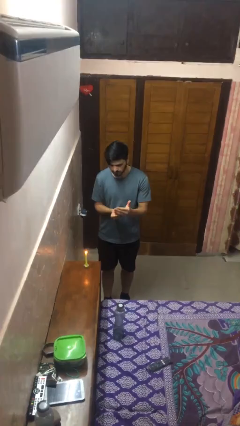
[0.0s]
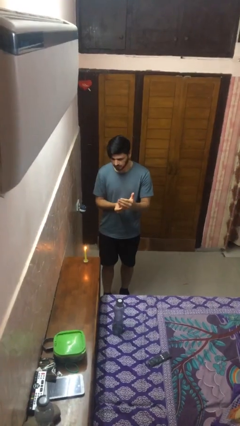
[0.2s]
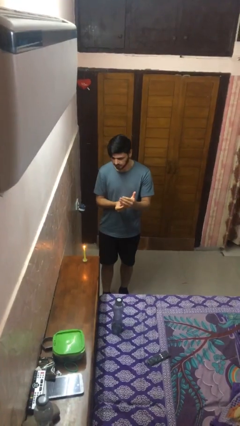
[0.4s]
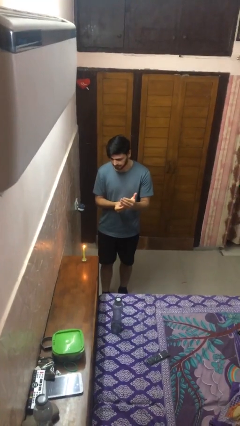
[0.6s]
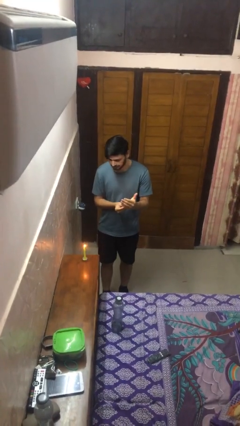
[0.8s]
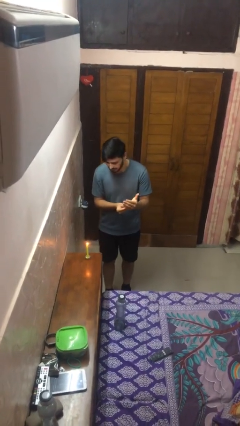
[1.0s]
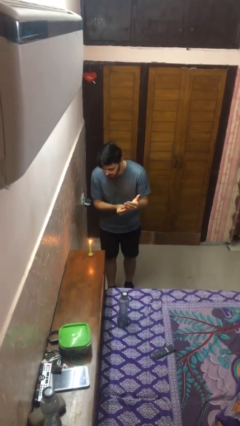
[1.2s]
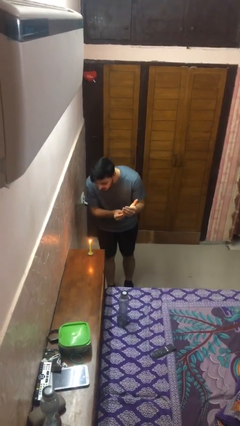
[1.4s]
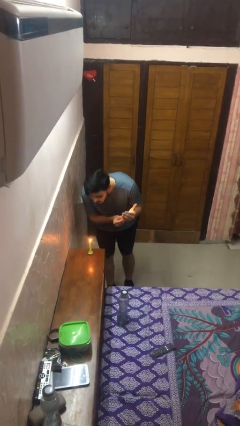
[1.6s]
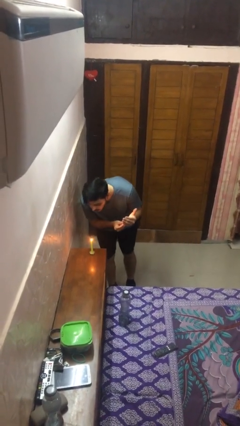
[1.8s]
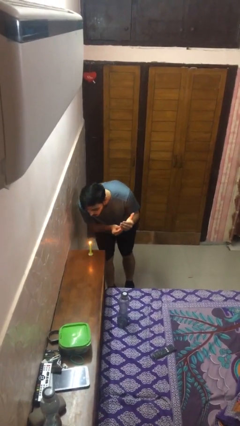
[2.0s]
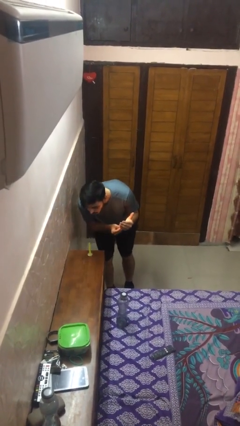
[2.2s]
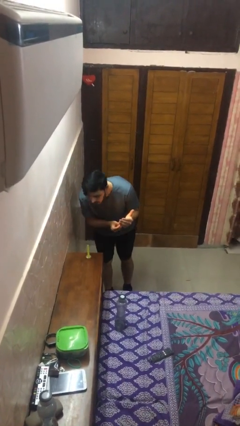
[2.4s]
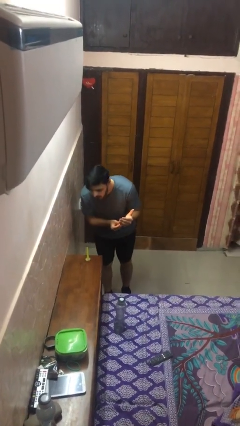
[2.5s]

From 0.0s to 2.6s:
person extinguishes candle

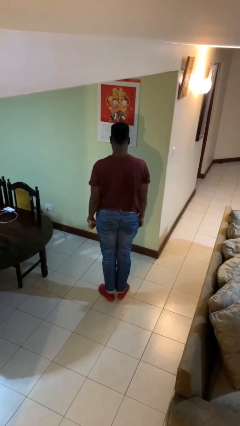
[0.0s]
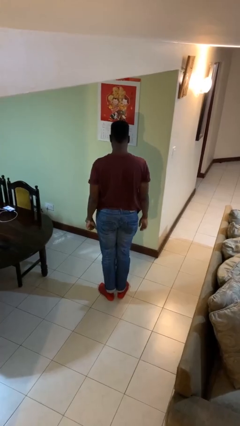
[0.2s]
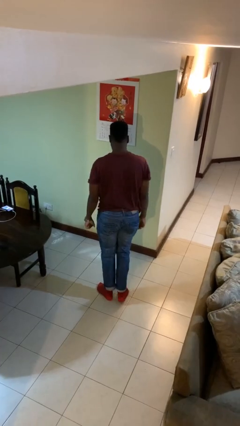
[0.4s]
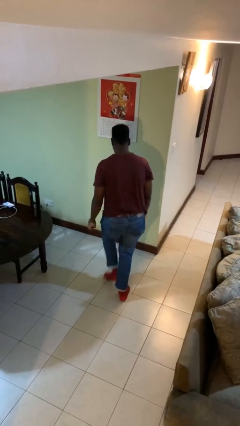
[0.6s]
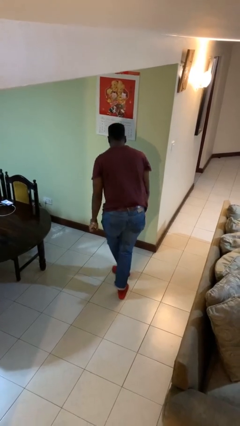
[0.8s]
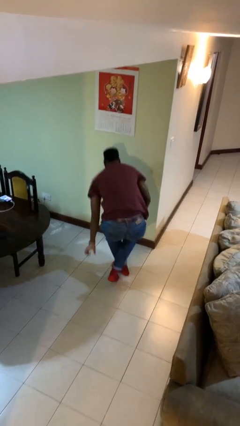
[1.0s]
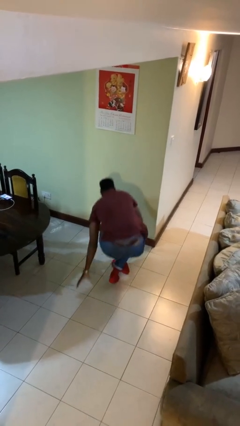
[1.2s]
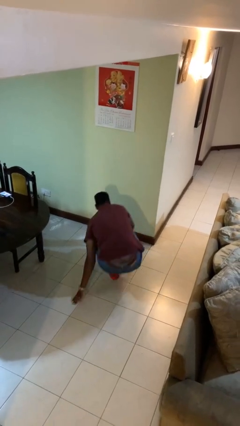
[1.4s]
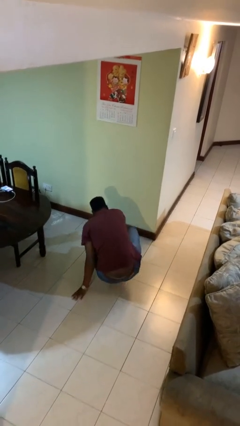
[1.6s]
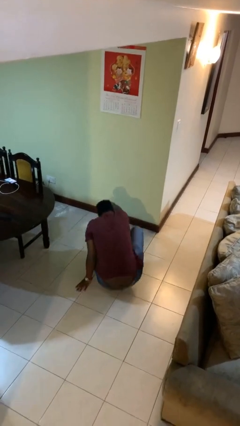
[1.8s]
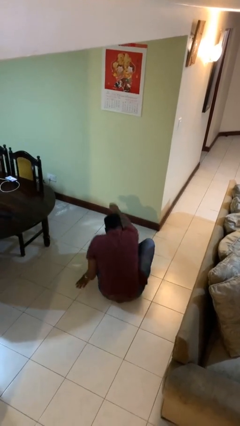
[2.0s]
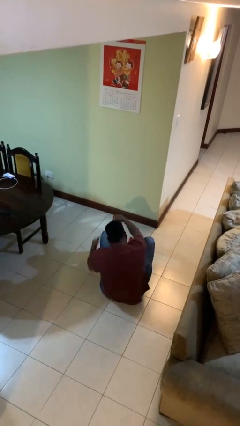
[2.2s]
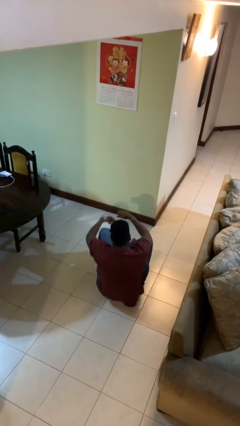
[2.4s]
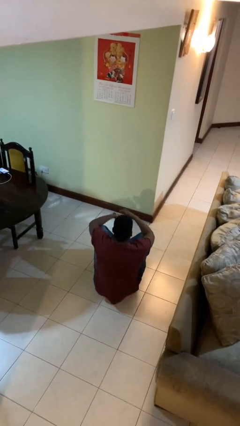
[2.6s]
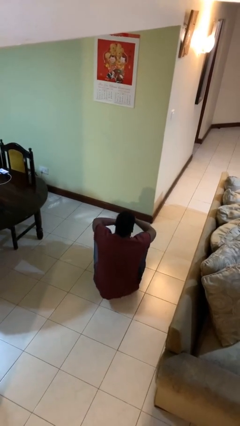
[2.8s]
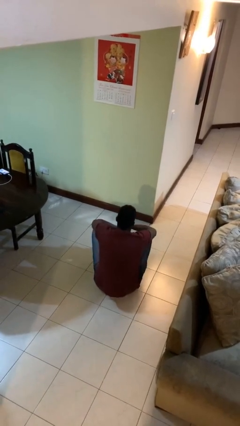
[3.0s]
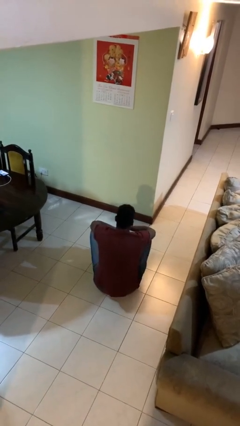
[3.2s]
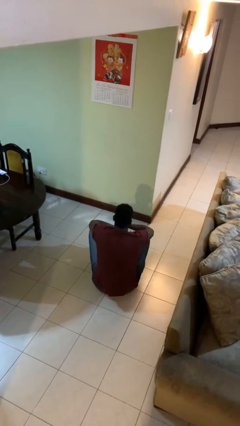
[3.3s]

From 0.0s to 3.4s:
person sits crisscross

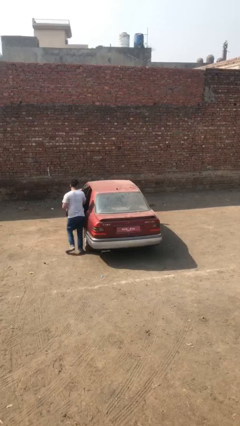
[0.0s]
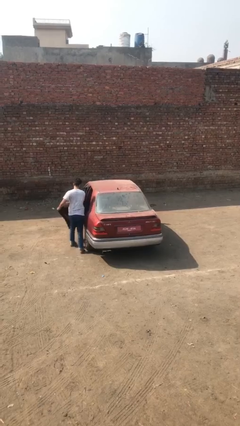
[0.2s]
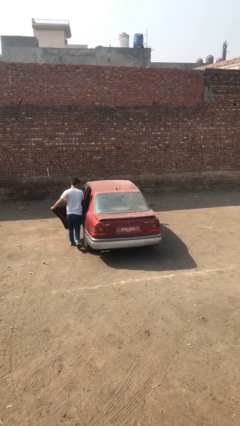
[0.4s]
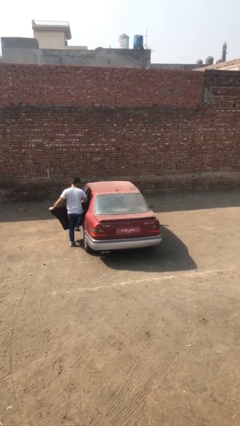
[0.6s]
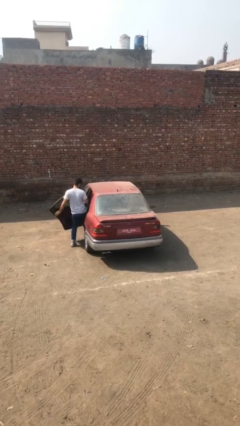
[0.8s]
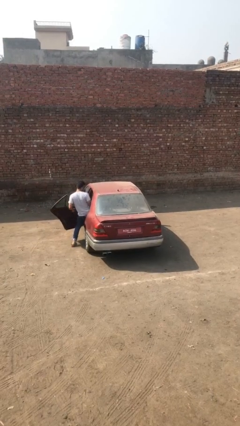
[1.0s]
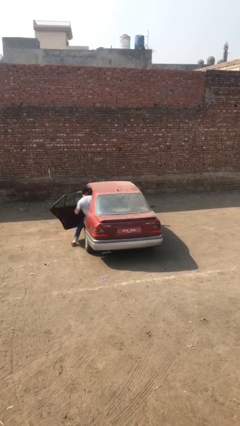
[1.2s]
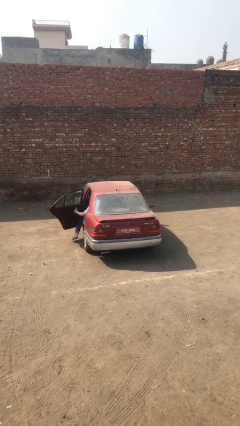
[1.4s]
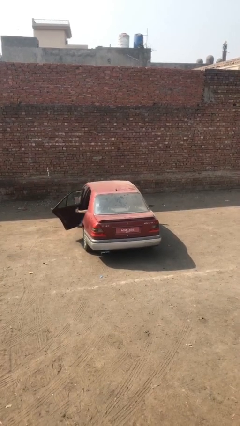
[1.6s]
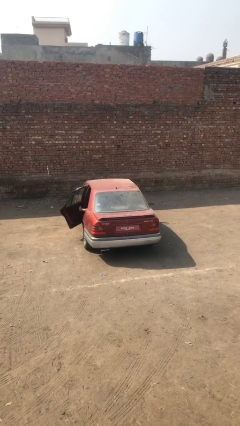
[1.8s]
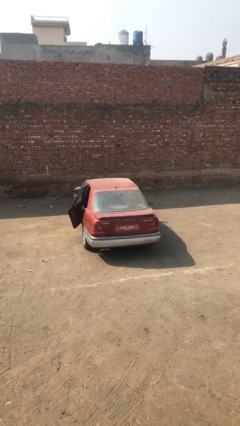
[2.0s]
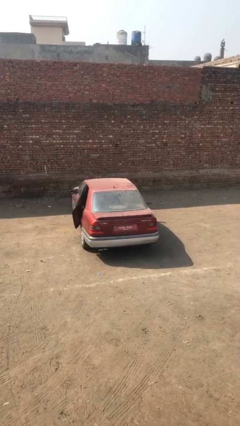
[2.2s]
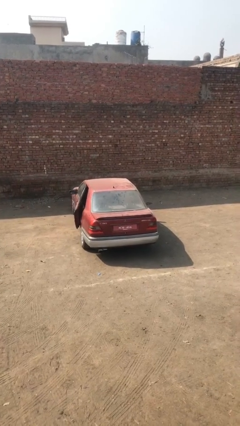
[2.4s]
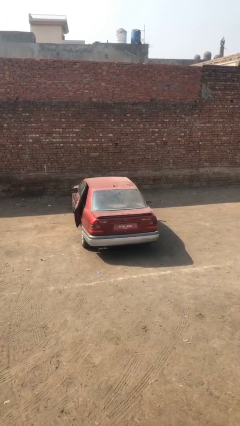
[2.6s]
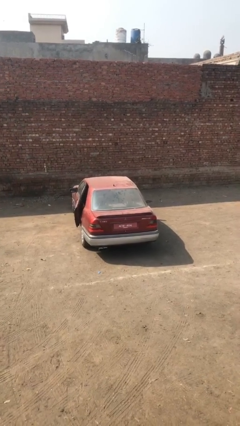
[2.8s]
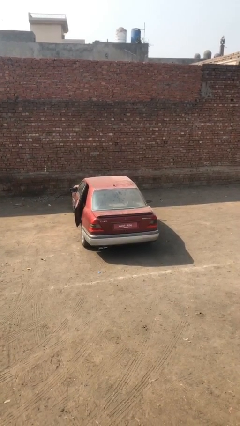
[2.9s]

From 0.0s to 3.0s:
car picks up person

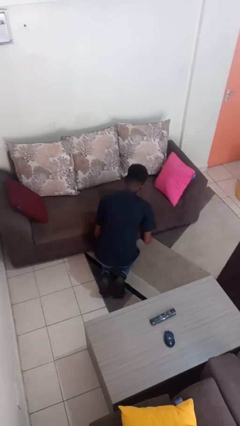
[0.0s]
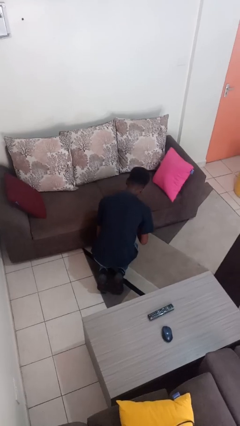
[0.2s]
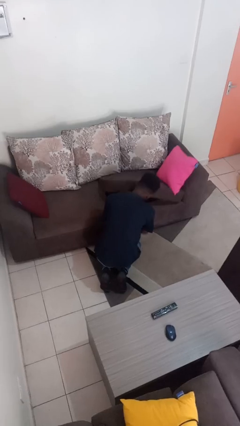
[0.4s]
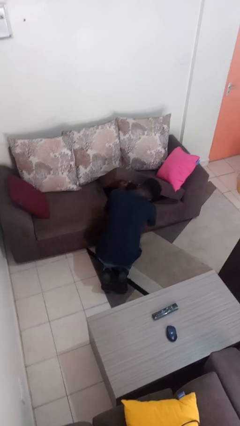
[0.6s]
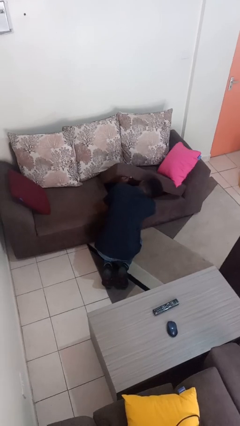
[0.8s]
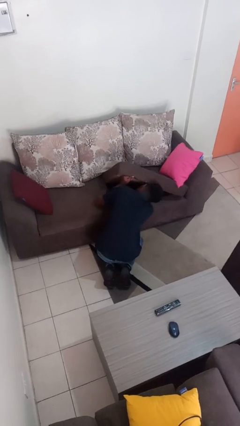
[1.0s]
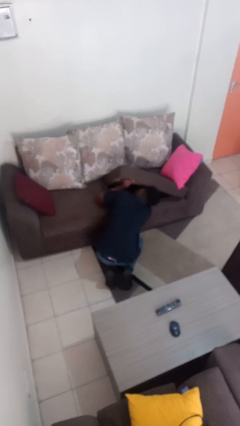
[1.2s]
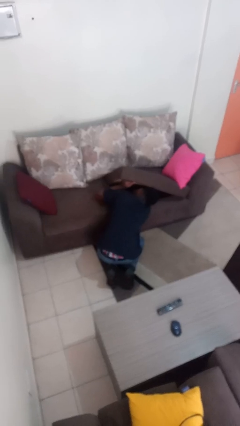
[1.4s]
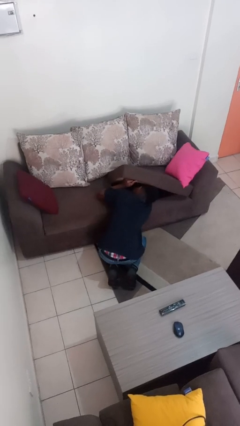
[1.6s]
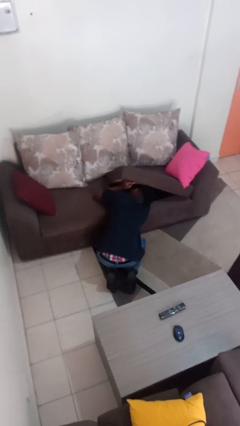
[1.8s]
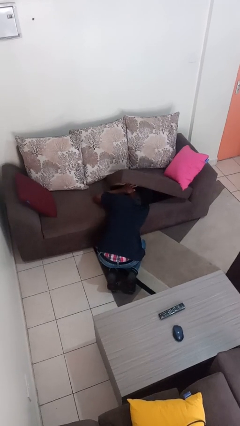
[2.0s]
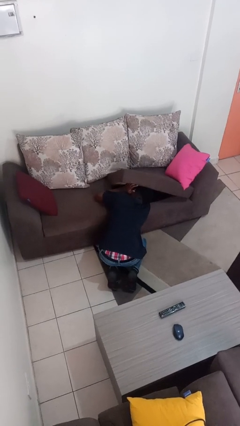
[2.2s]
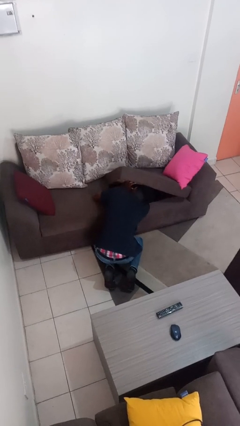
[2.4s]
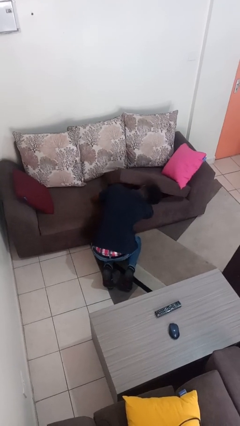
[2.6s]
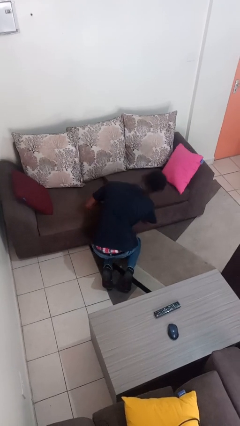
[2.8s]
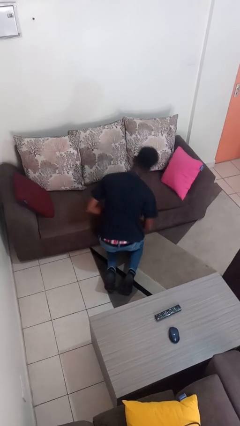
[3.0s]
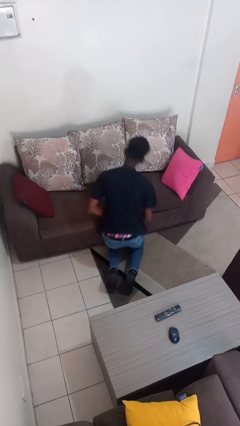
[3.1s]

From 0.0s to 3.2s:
person searches under couch

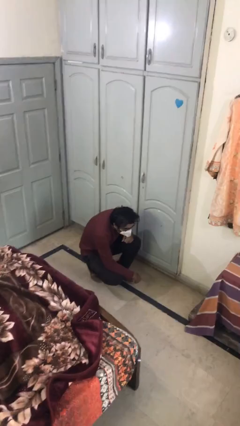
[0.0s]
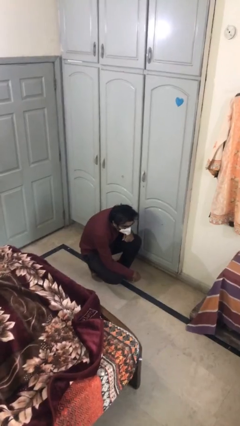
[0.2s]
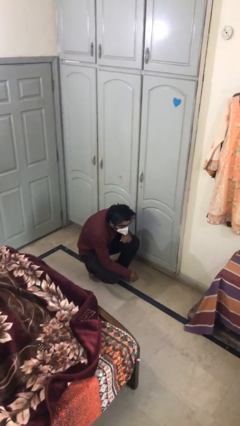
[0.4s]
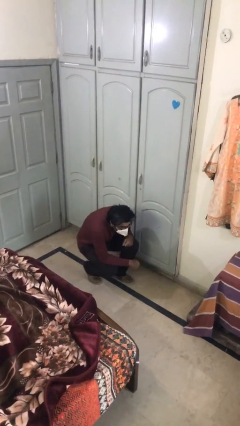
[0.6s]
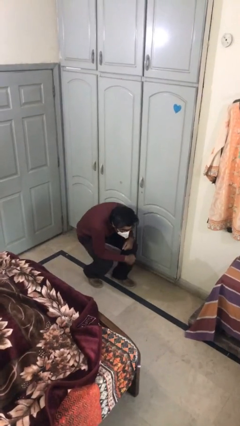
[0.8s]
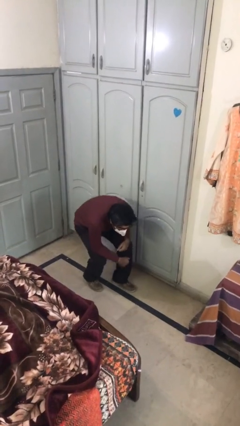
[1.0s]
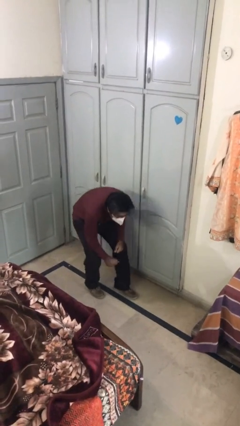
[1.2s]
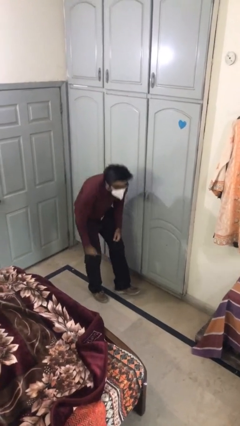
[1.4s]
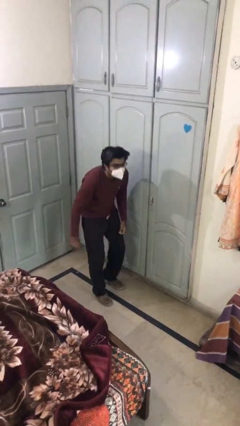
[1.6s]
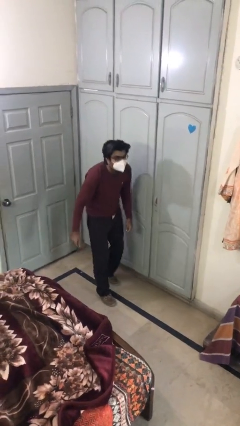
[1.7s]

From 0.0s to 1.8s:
person stands up

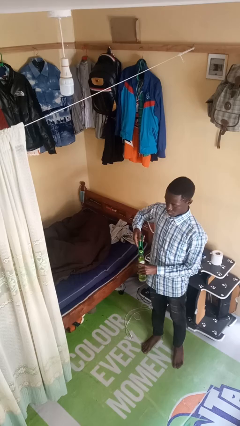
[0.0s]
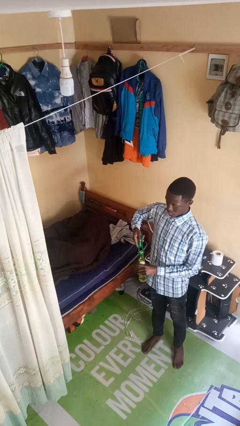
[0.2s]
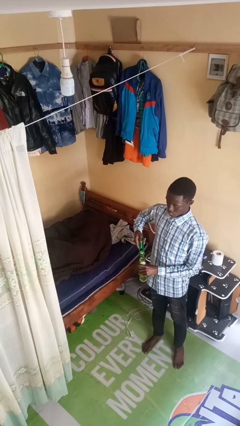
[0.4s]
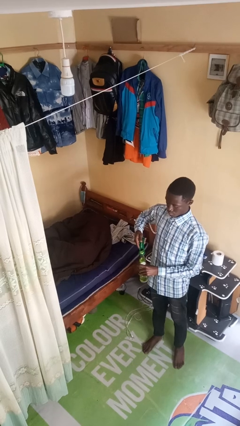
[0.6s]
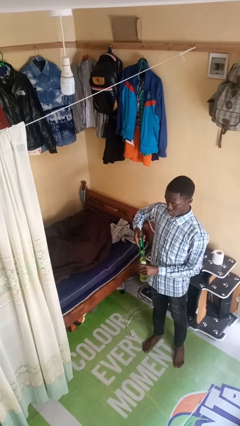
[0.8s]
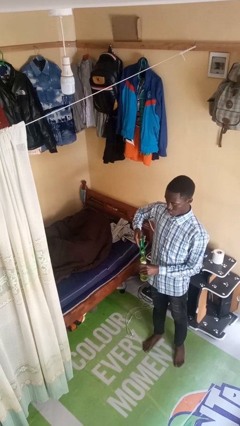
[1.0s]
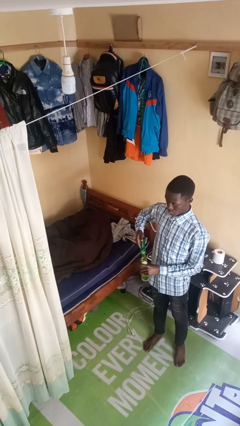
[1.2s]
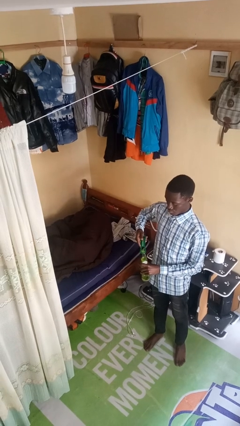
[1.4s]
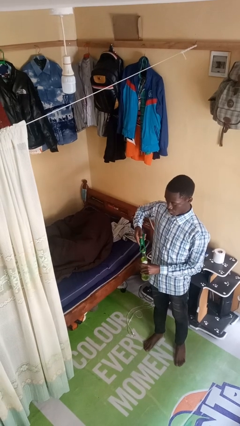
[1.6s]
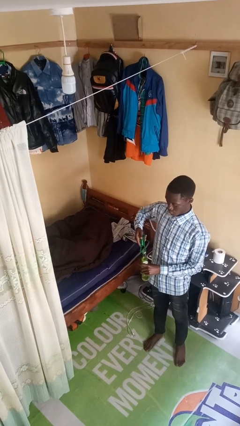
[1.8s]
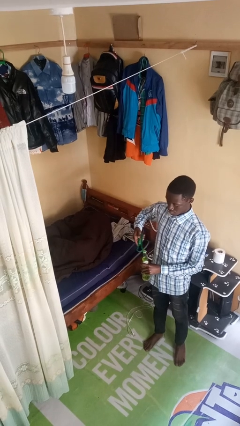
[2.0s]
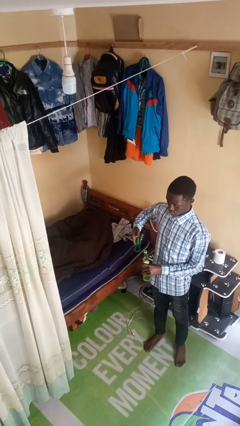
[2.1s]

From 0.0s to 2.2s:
person opens can with can opener

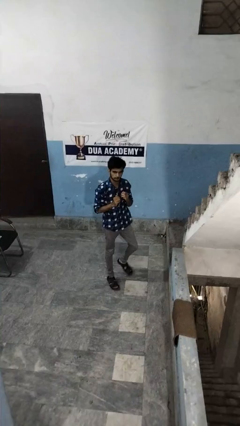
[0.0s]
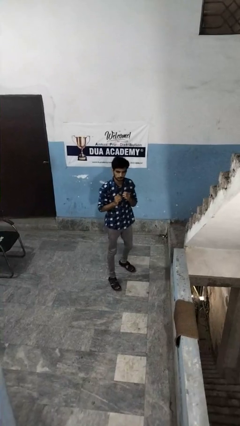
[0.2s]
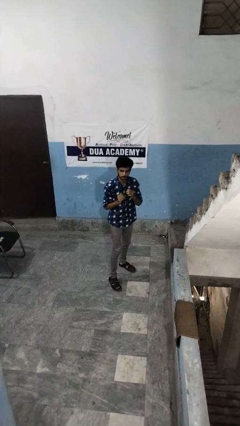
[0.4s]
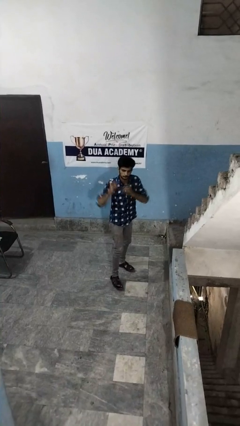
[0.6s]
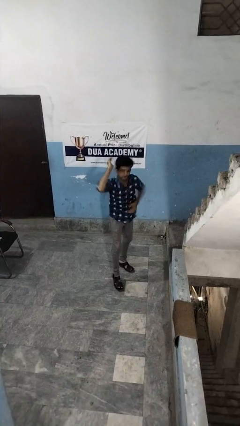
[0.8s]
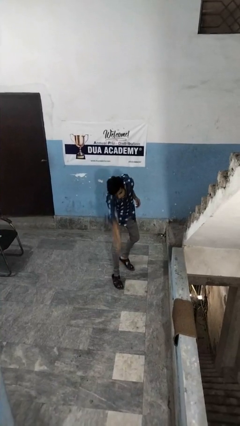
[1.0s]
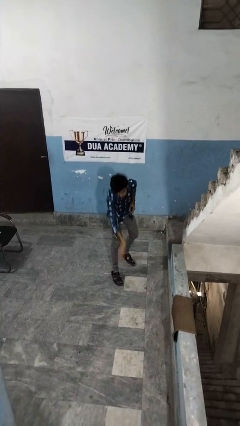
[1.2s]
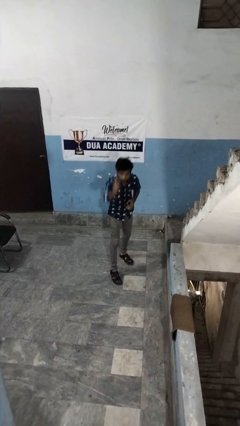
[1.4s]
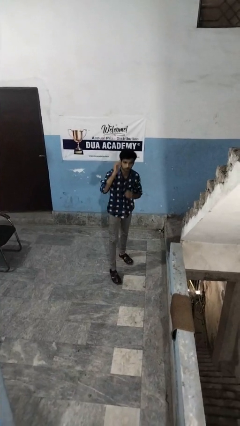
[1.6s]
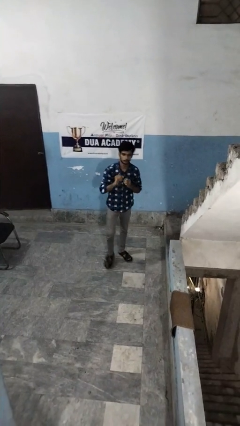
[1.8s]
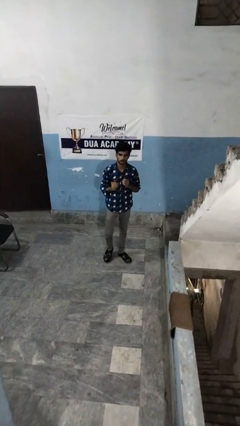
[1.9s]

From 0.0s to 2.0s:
person karate chop
